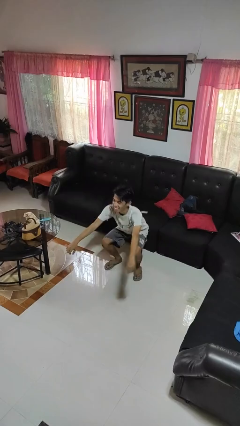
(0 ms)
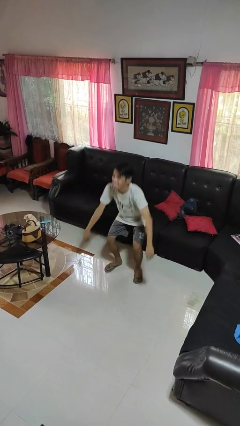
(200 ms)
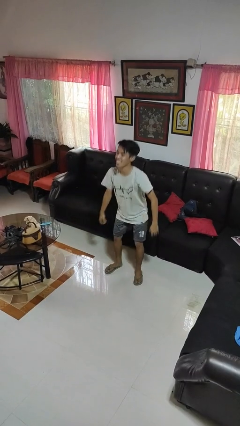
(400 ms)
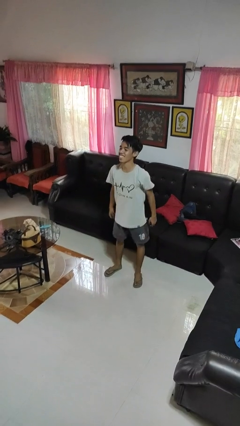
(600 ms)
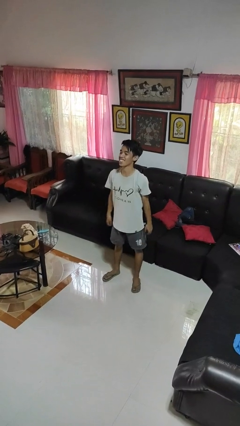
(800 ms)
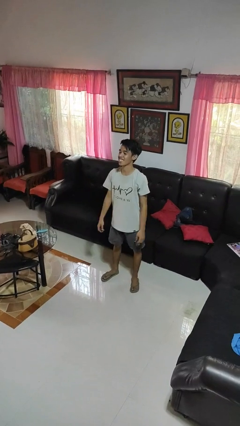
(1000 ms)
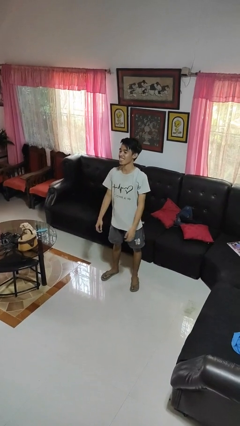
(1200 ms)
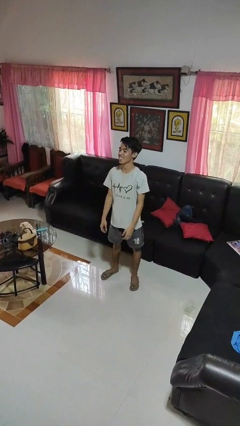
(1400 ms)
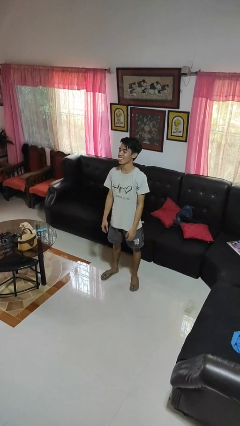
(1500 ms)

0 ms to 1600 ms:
person stands up

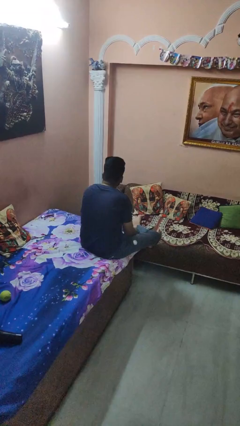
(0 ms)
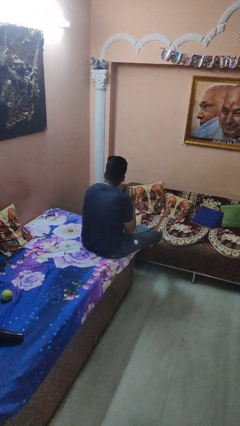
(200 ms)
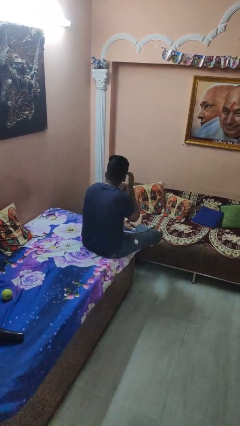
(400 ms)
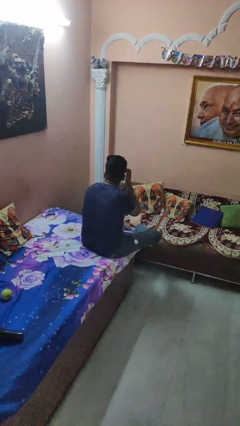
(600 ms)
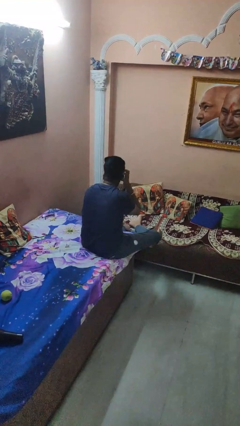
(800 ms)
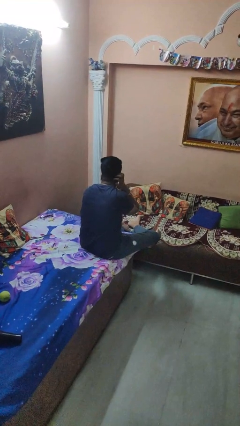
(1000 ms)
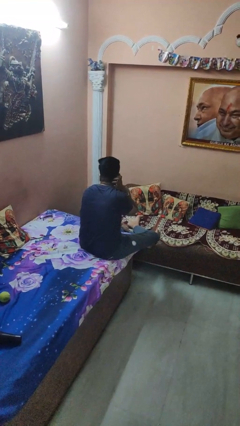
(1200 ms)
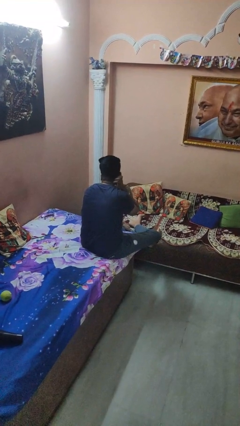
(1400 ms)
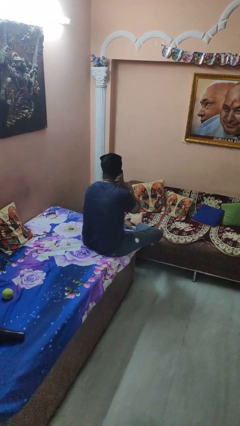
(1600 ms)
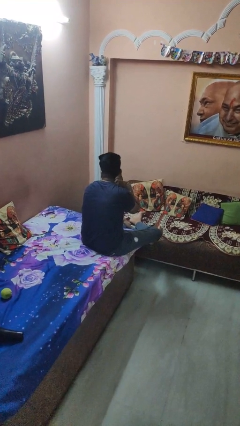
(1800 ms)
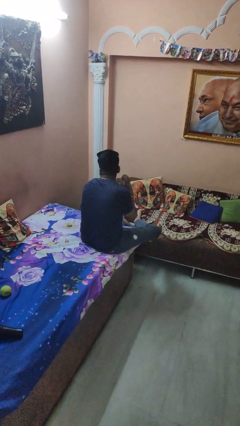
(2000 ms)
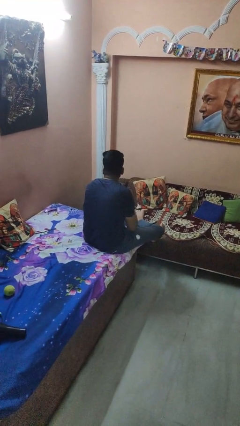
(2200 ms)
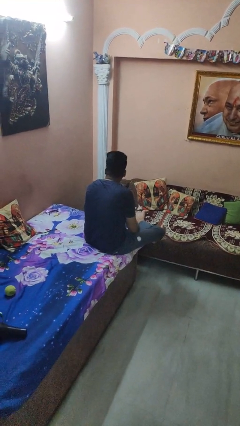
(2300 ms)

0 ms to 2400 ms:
person strokes hair

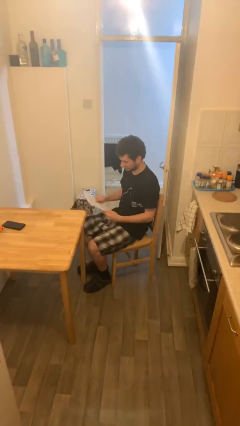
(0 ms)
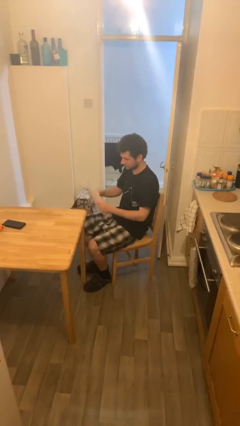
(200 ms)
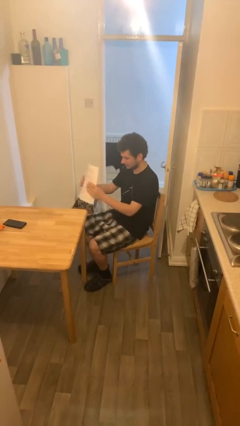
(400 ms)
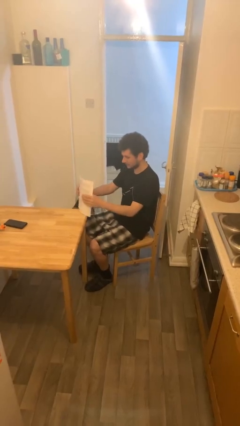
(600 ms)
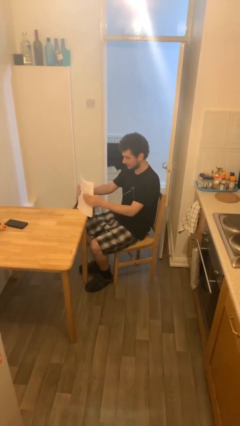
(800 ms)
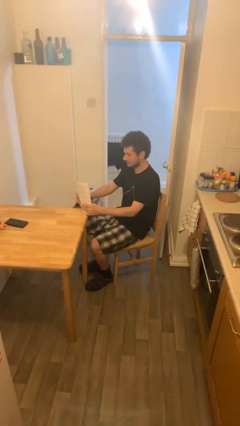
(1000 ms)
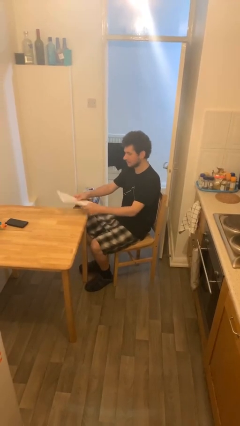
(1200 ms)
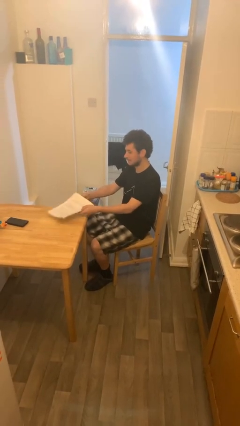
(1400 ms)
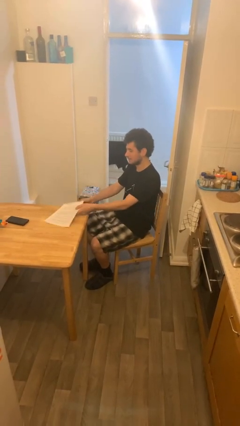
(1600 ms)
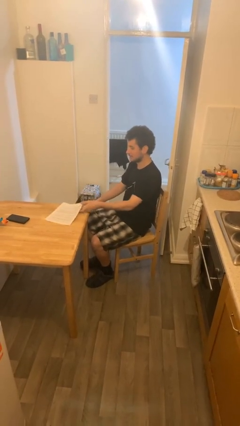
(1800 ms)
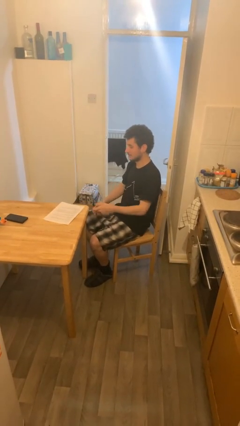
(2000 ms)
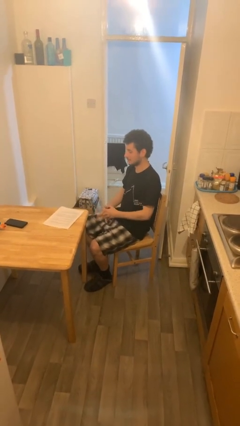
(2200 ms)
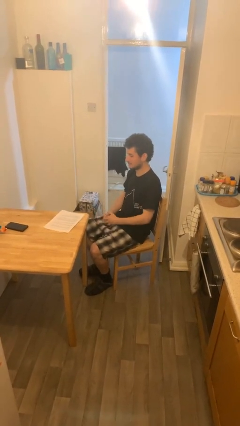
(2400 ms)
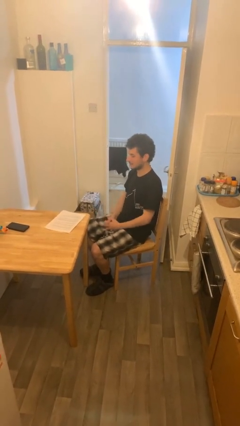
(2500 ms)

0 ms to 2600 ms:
person puts down object on table

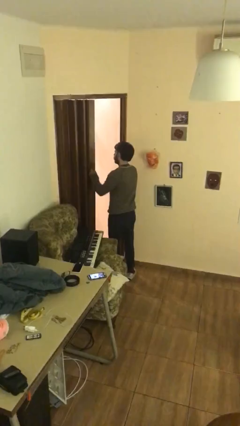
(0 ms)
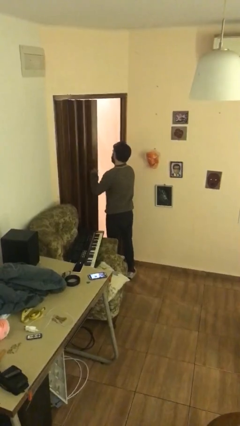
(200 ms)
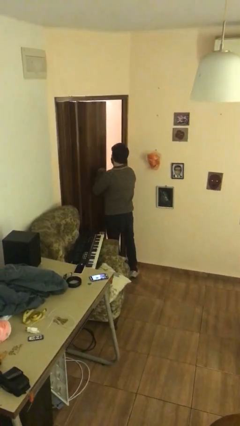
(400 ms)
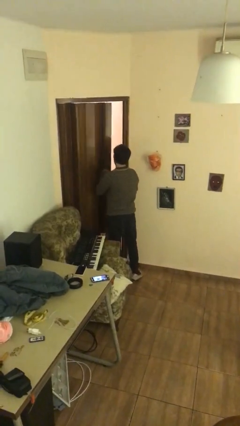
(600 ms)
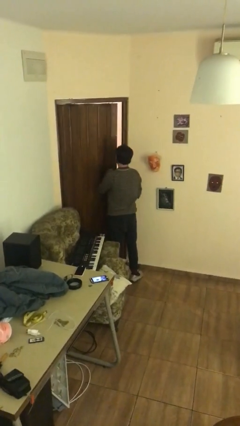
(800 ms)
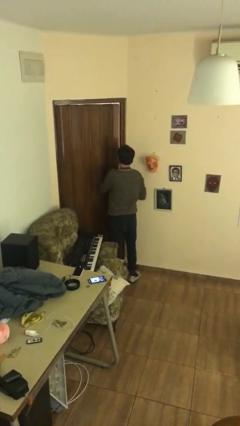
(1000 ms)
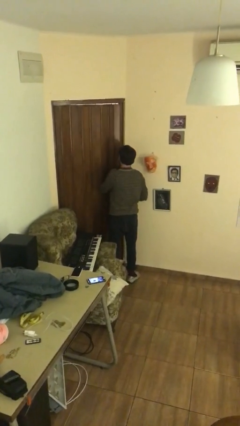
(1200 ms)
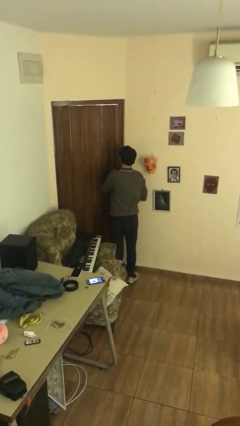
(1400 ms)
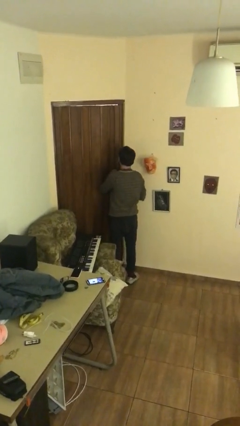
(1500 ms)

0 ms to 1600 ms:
person closes sliding door

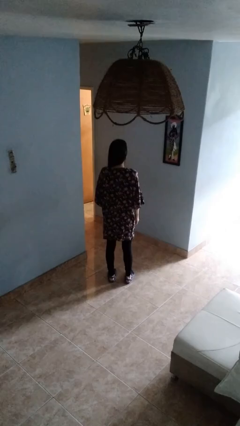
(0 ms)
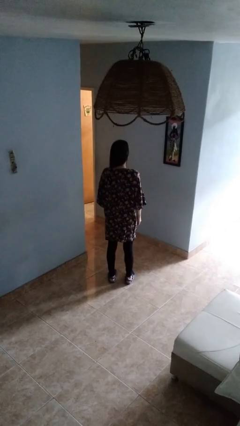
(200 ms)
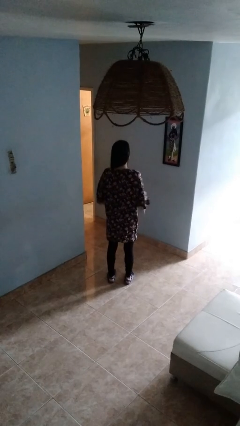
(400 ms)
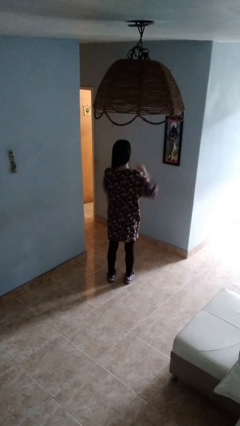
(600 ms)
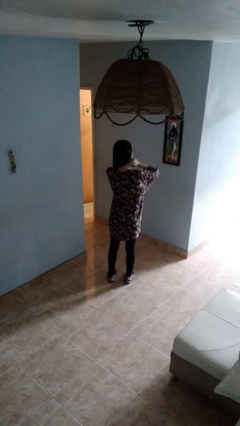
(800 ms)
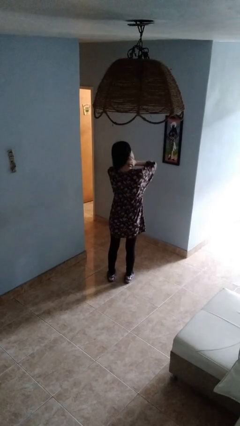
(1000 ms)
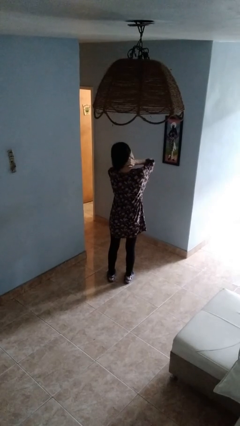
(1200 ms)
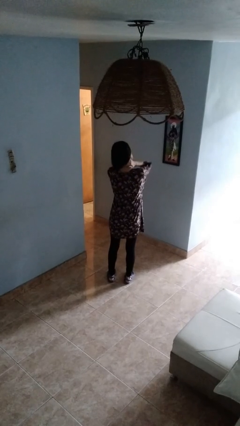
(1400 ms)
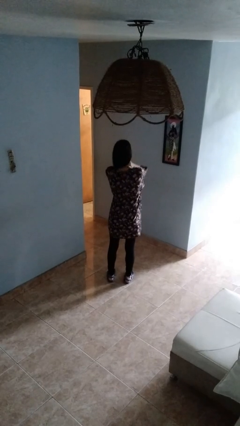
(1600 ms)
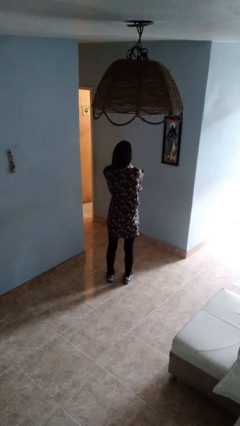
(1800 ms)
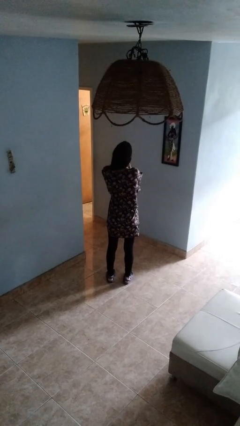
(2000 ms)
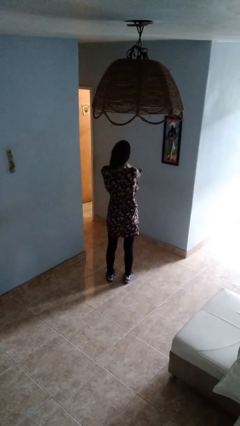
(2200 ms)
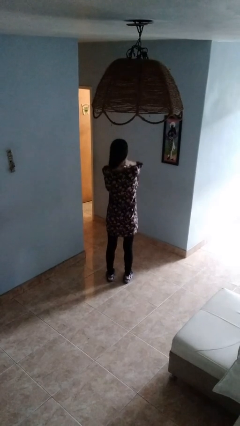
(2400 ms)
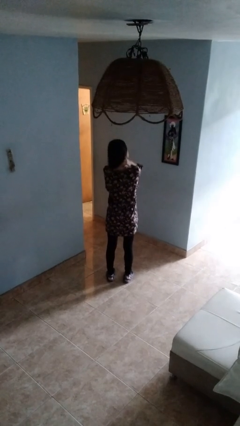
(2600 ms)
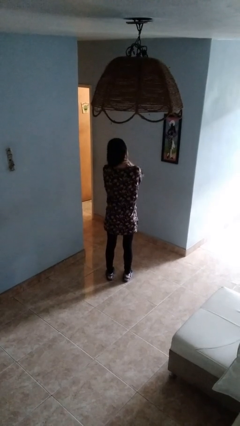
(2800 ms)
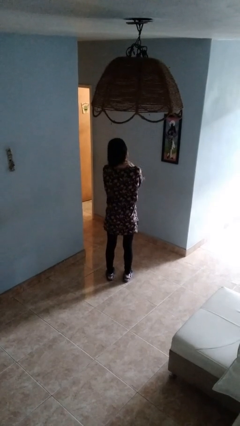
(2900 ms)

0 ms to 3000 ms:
person rubs neck

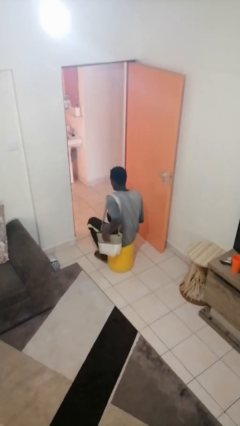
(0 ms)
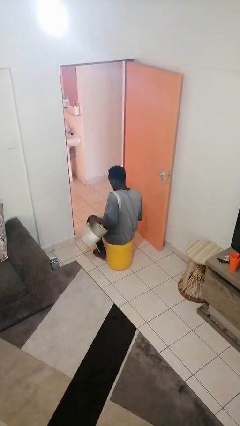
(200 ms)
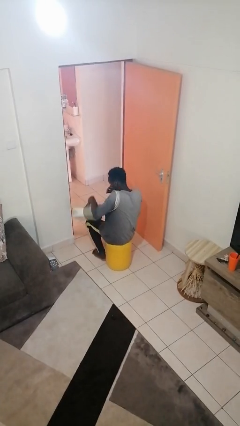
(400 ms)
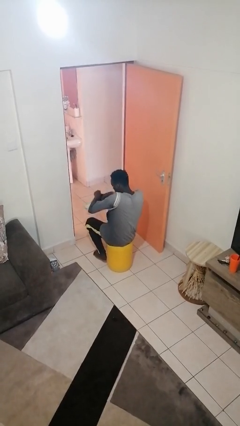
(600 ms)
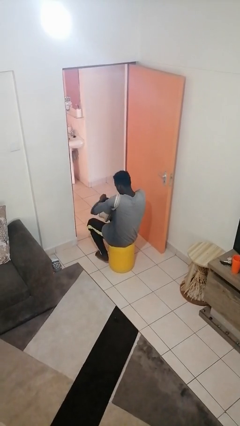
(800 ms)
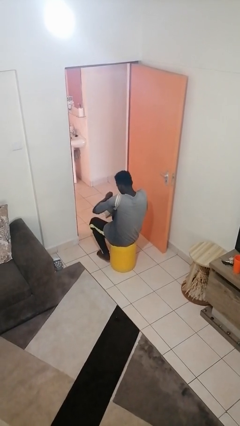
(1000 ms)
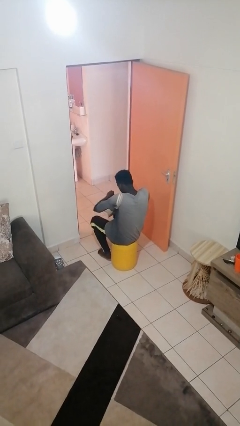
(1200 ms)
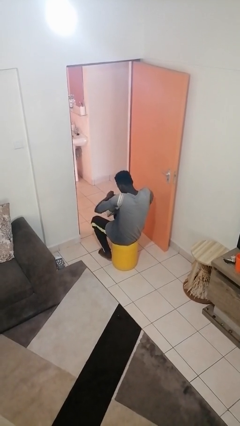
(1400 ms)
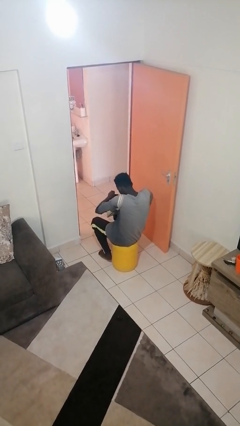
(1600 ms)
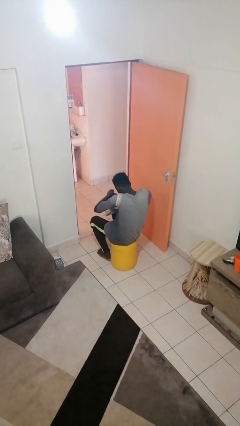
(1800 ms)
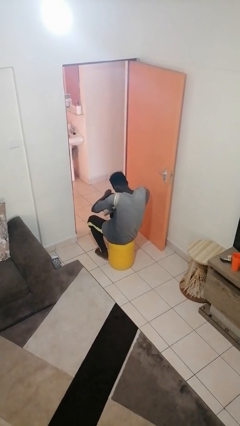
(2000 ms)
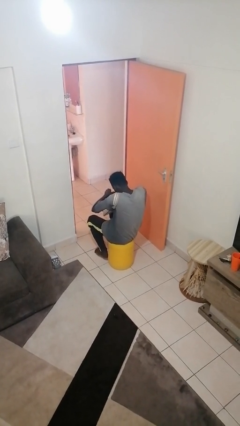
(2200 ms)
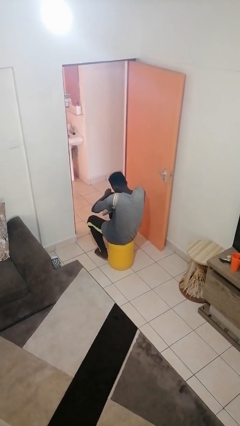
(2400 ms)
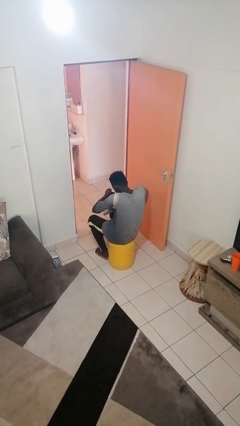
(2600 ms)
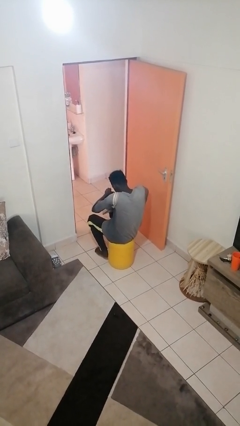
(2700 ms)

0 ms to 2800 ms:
person searches in purse

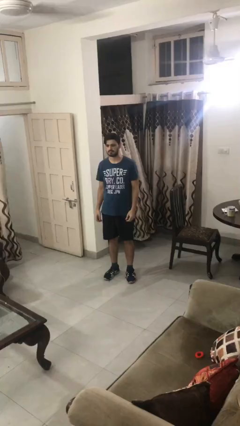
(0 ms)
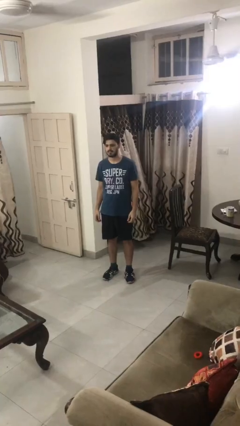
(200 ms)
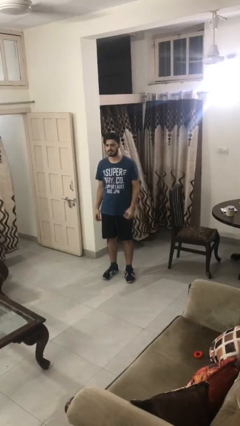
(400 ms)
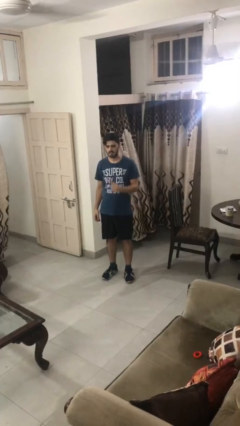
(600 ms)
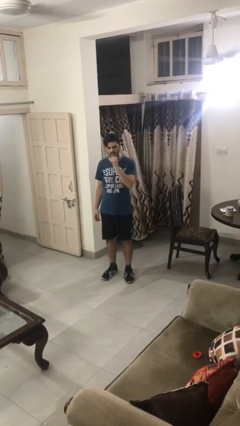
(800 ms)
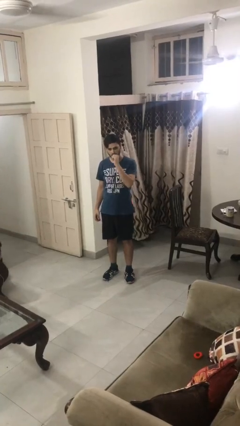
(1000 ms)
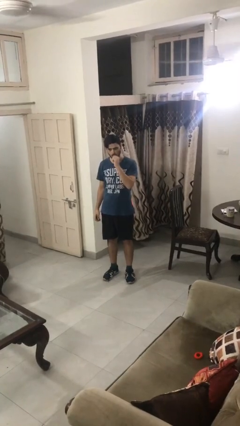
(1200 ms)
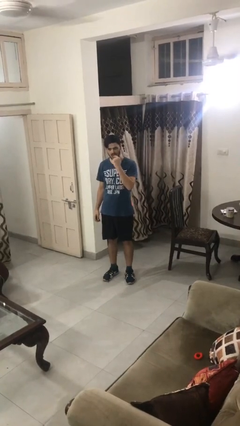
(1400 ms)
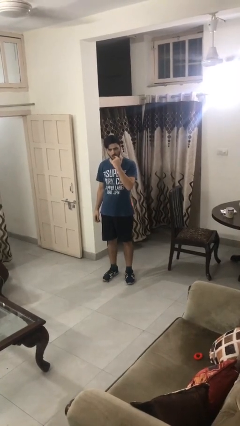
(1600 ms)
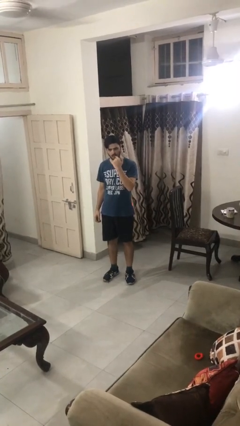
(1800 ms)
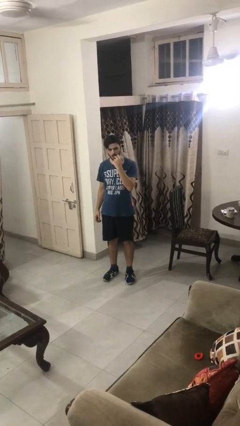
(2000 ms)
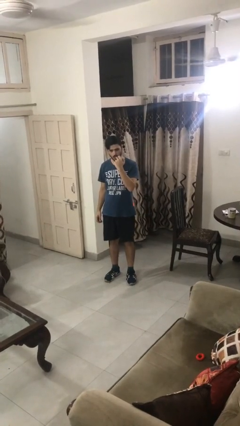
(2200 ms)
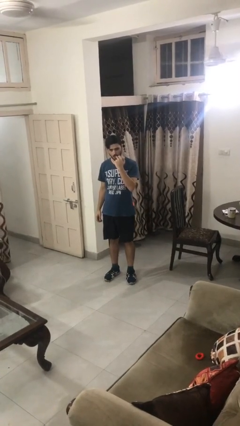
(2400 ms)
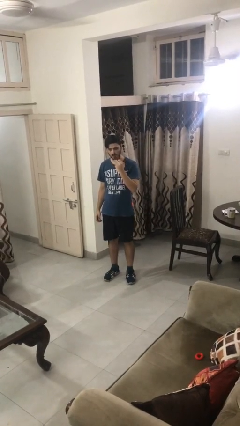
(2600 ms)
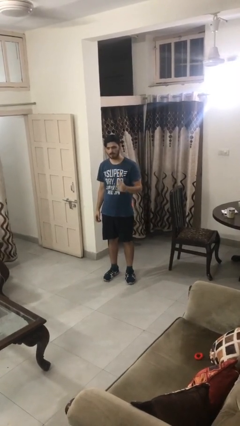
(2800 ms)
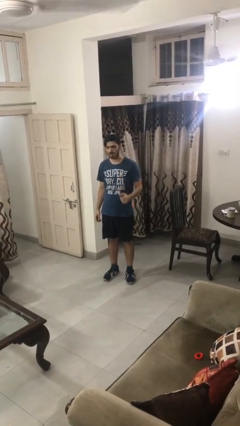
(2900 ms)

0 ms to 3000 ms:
person licks fingers
